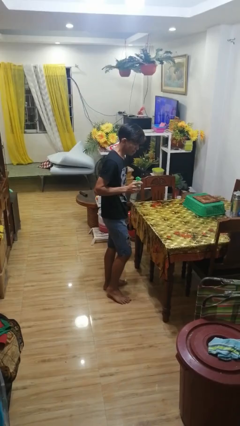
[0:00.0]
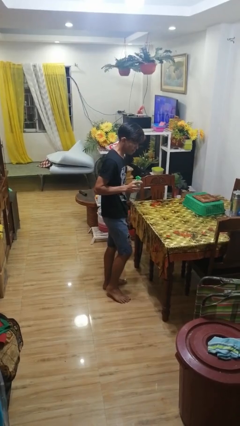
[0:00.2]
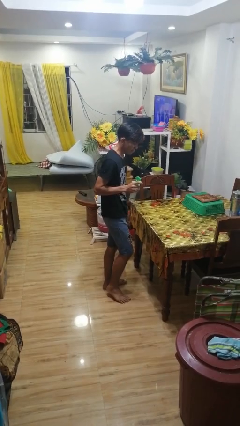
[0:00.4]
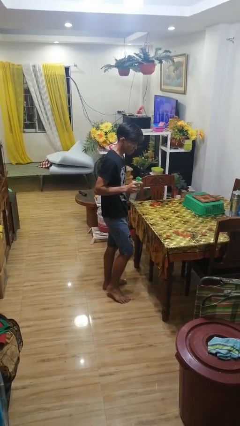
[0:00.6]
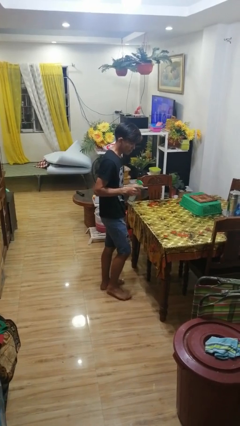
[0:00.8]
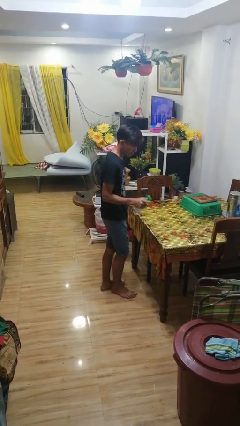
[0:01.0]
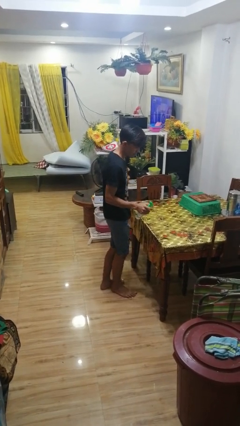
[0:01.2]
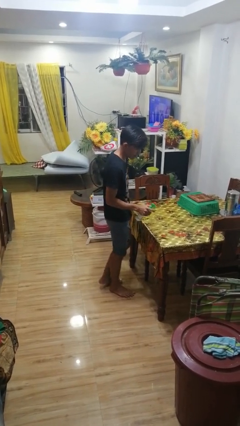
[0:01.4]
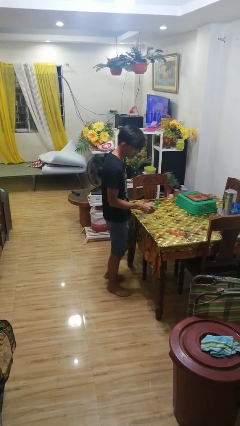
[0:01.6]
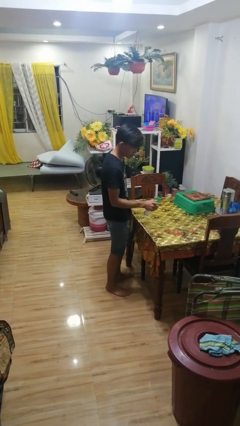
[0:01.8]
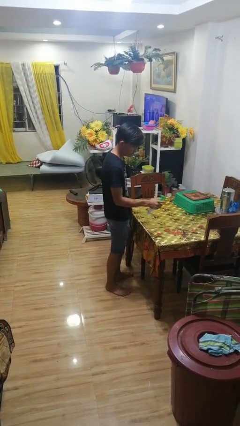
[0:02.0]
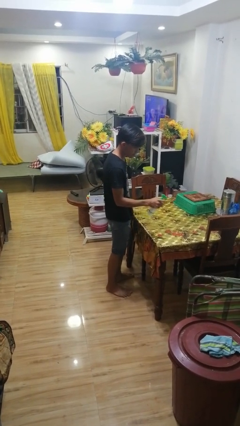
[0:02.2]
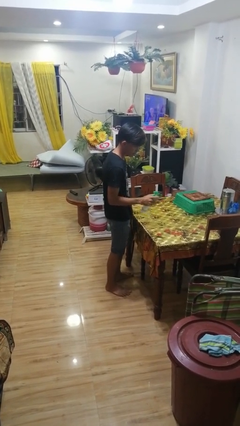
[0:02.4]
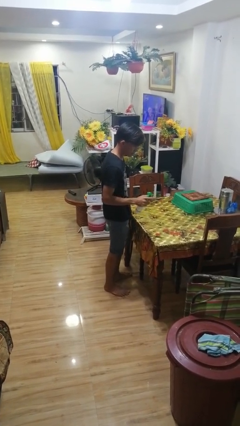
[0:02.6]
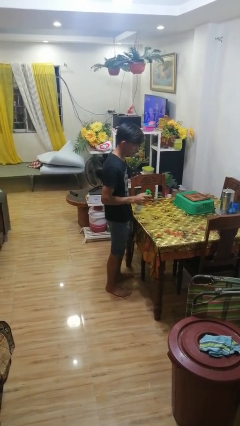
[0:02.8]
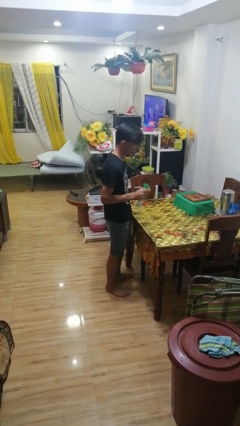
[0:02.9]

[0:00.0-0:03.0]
person sprays from bottle

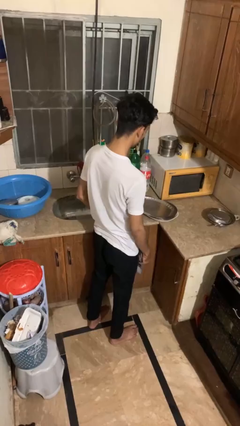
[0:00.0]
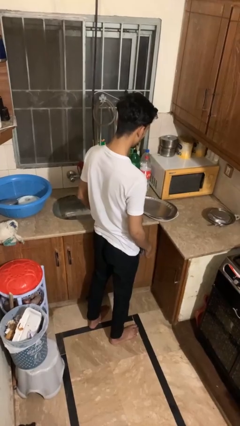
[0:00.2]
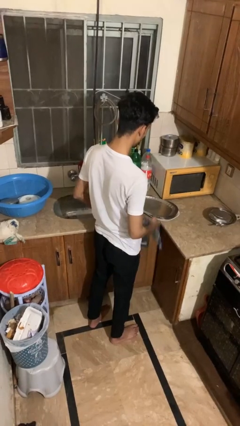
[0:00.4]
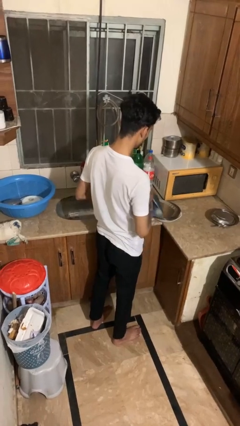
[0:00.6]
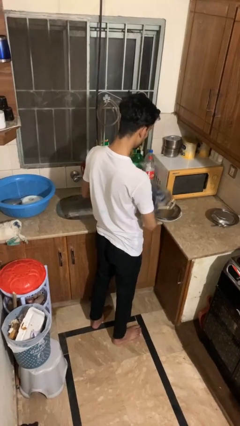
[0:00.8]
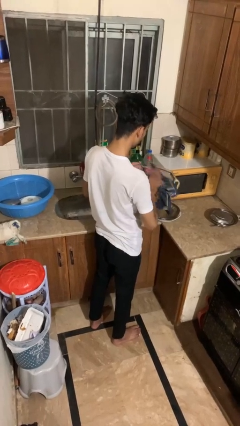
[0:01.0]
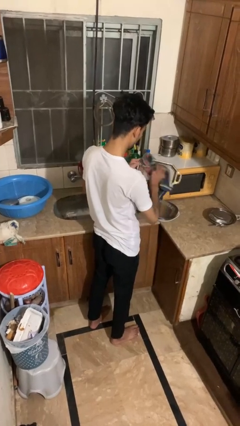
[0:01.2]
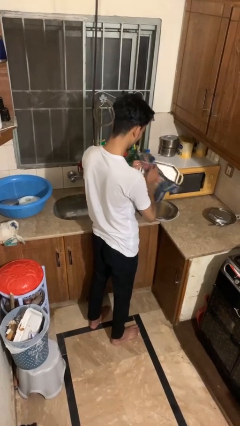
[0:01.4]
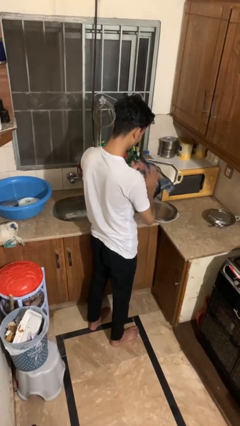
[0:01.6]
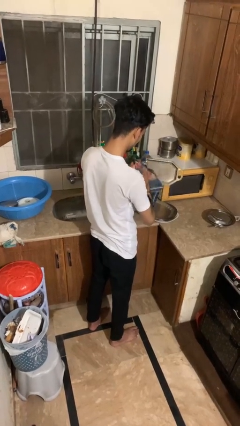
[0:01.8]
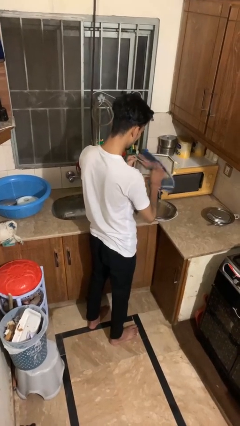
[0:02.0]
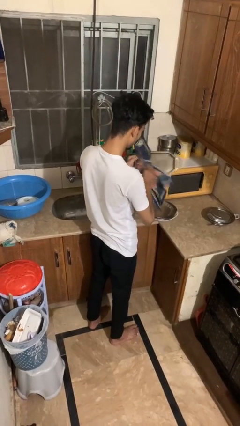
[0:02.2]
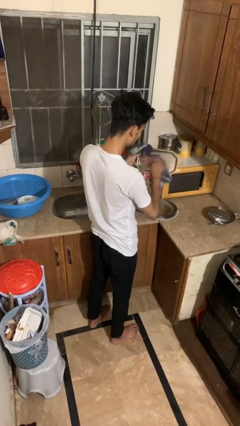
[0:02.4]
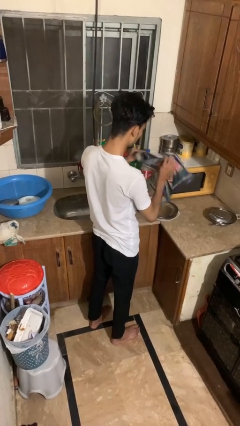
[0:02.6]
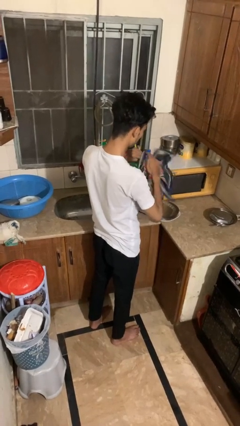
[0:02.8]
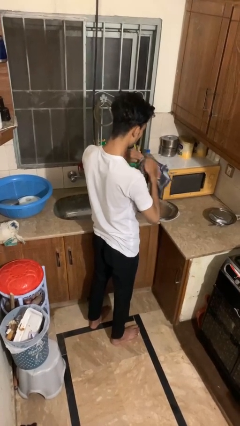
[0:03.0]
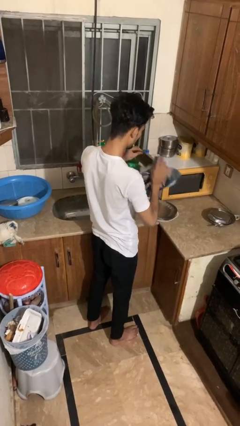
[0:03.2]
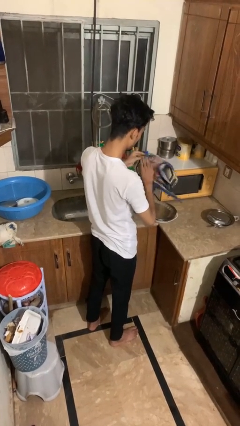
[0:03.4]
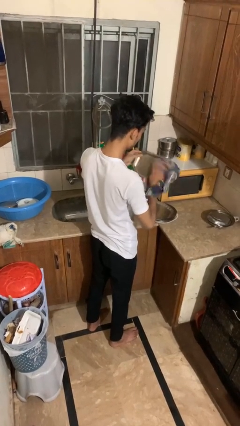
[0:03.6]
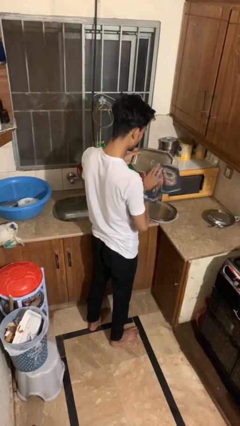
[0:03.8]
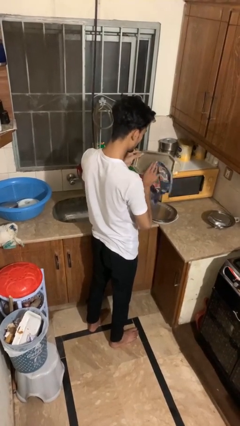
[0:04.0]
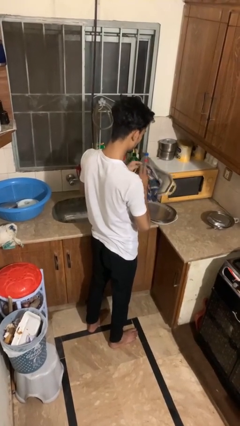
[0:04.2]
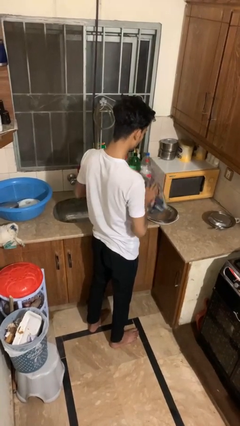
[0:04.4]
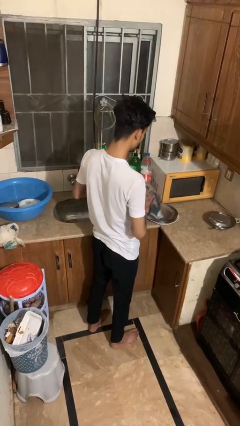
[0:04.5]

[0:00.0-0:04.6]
person dries dish

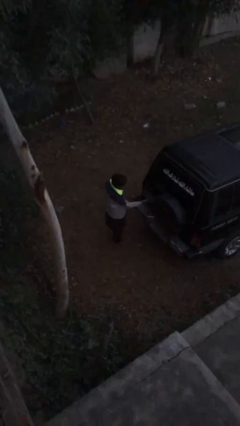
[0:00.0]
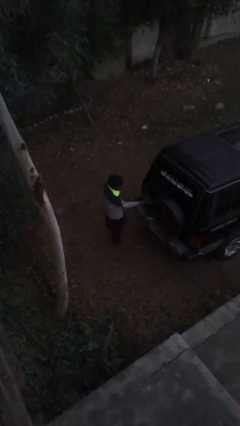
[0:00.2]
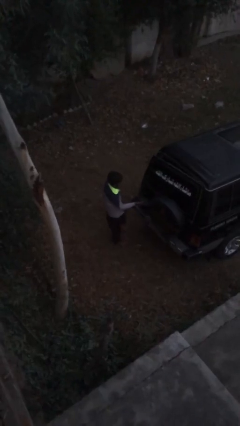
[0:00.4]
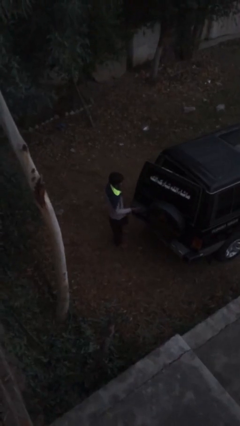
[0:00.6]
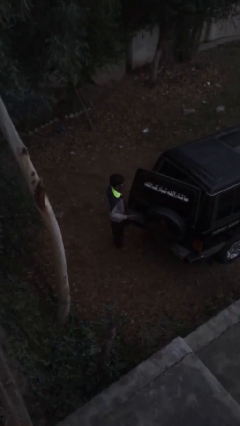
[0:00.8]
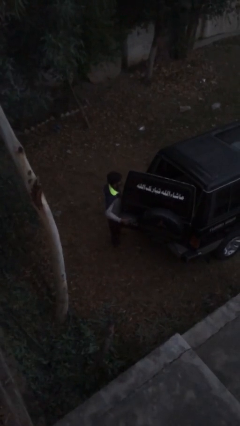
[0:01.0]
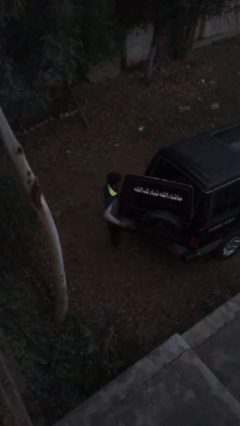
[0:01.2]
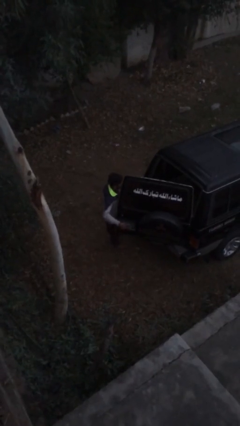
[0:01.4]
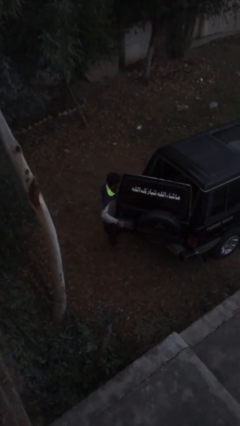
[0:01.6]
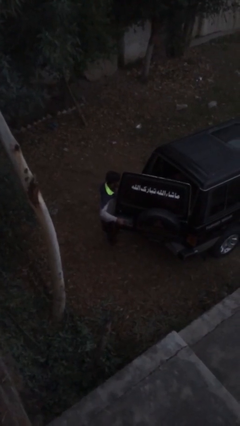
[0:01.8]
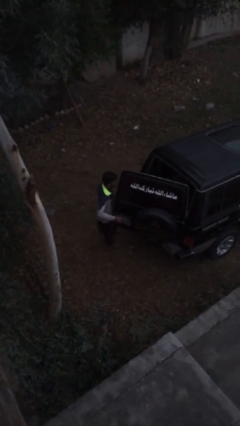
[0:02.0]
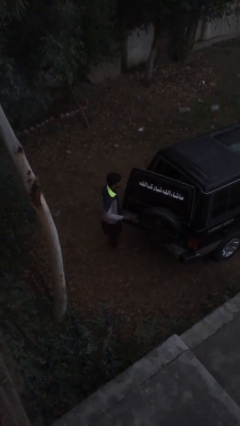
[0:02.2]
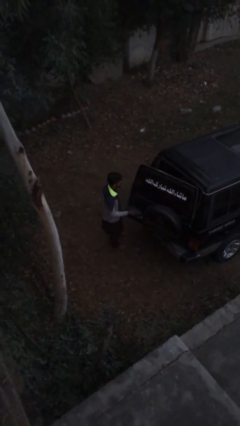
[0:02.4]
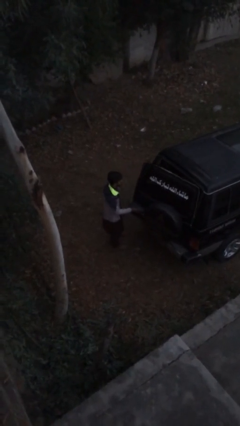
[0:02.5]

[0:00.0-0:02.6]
person opens car trunk

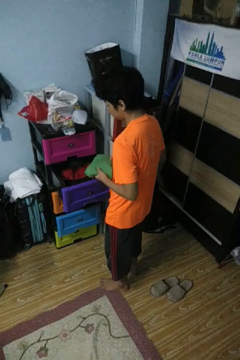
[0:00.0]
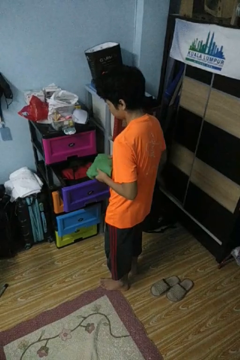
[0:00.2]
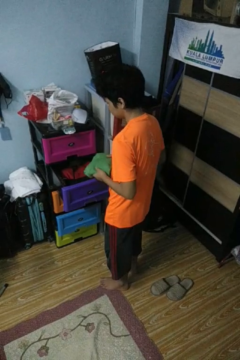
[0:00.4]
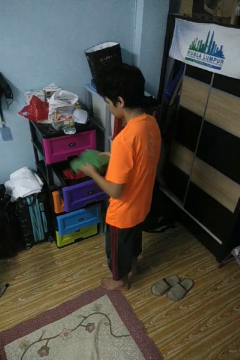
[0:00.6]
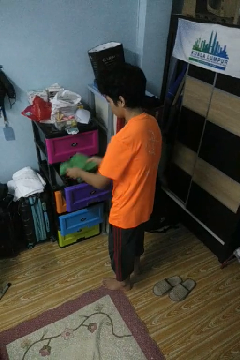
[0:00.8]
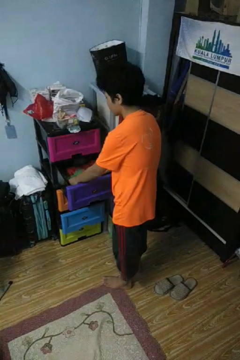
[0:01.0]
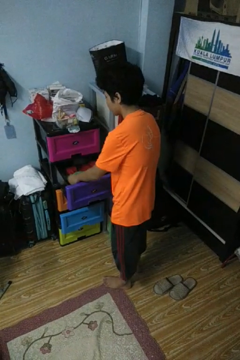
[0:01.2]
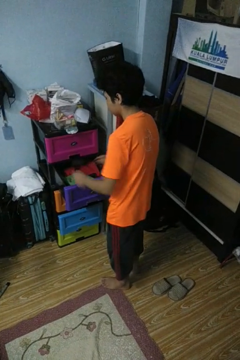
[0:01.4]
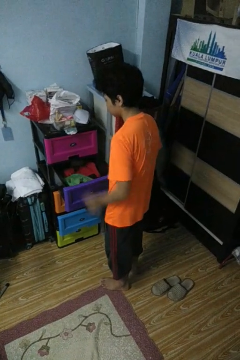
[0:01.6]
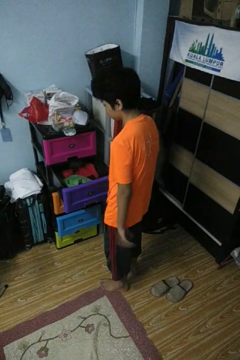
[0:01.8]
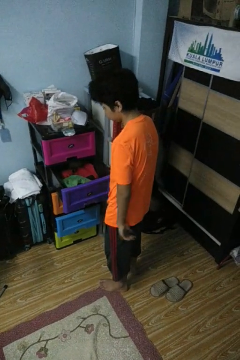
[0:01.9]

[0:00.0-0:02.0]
person puts clothes into dresser

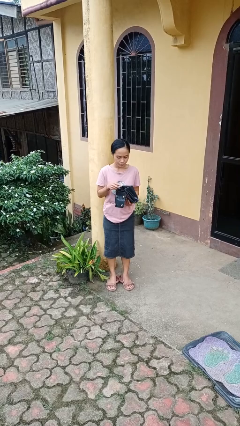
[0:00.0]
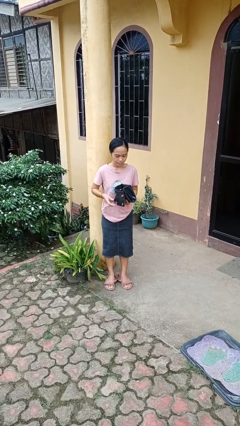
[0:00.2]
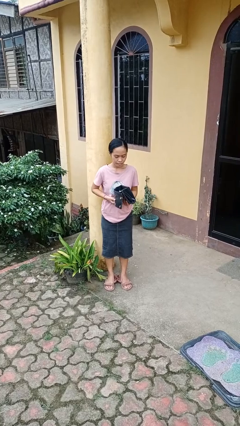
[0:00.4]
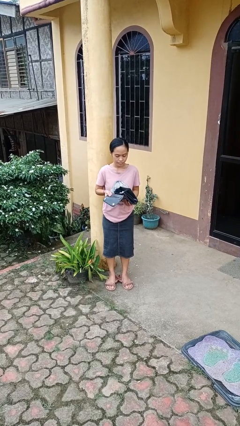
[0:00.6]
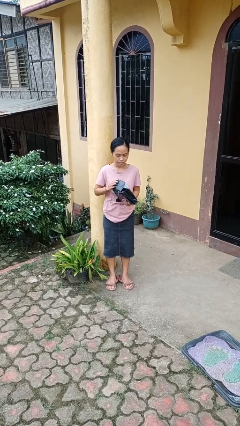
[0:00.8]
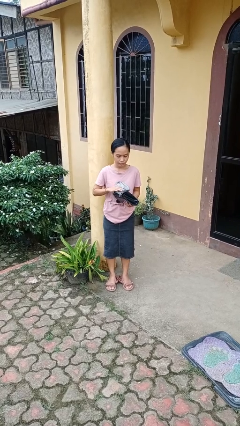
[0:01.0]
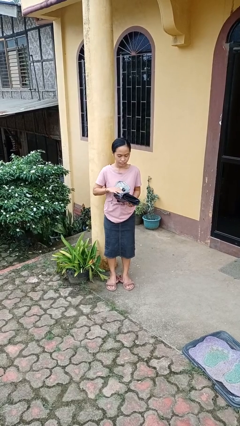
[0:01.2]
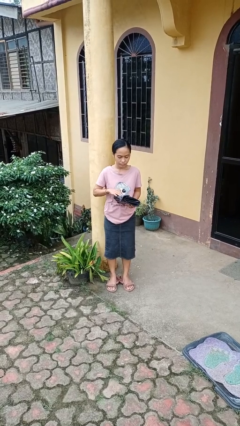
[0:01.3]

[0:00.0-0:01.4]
person puts object into purse

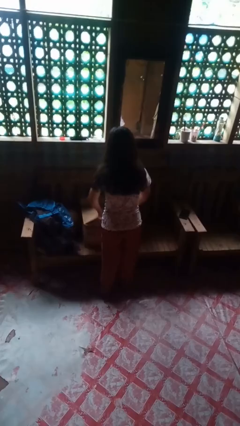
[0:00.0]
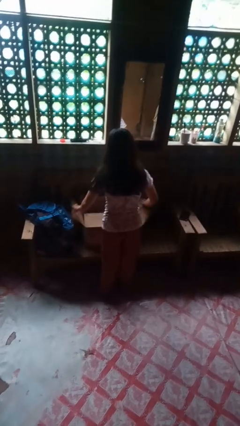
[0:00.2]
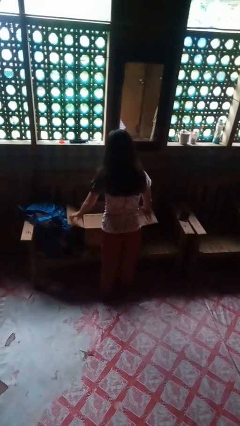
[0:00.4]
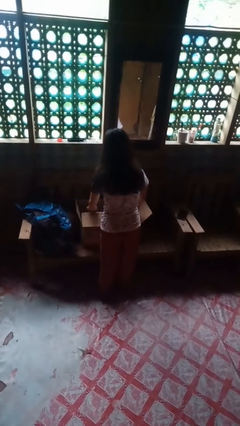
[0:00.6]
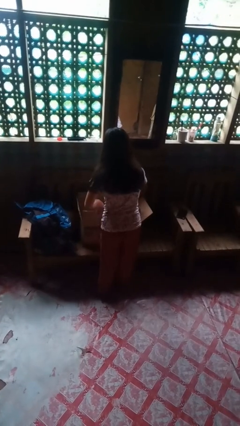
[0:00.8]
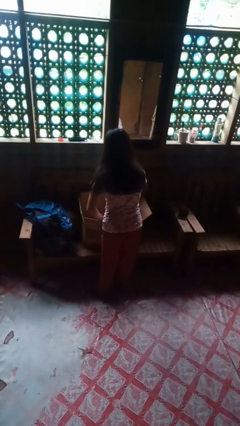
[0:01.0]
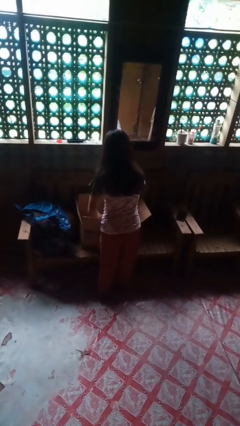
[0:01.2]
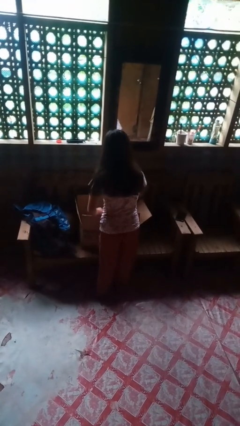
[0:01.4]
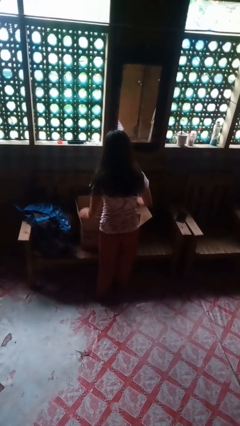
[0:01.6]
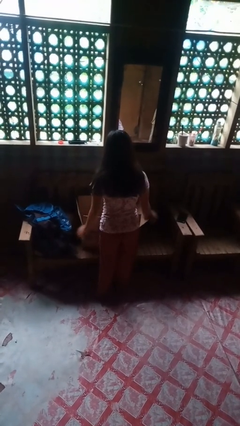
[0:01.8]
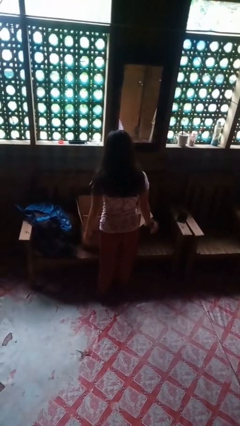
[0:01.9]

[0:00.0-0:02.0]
person opens box

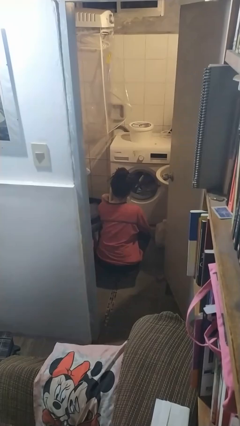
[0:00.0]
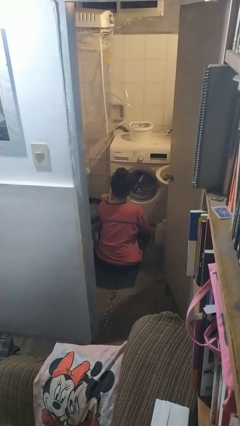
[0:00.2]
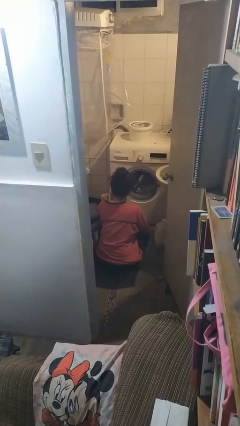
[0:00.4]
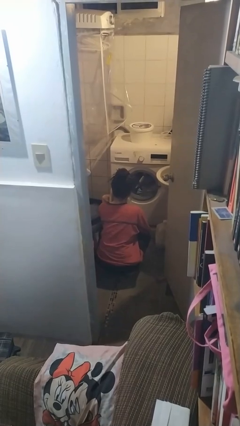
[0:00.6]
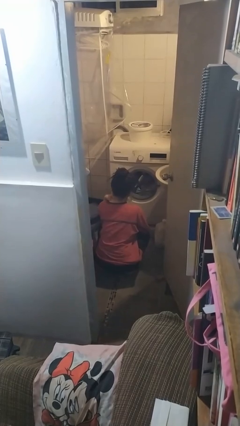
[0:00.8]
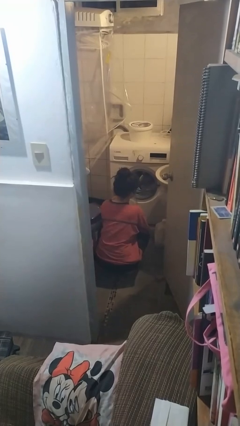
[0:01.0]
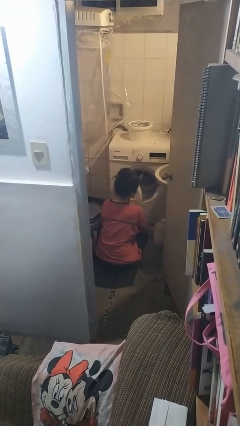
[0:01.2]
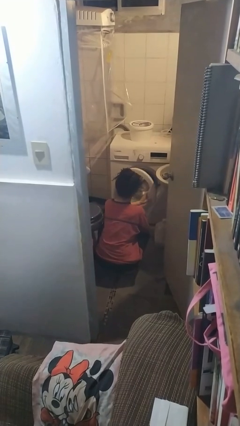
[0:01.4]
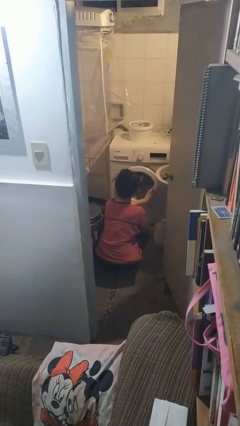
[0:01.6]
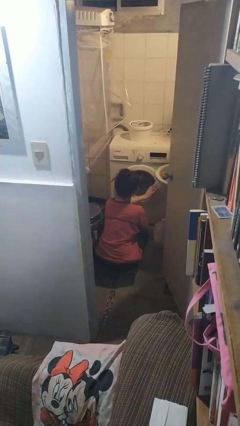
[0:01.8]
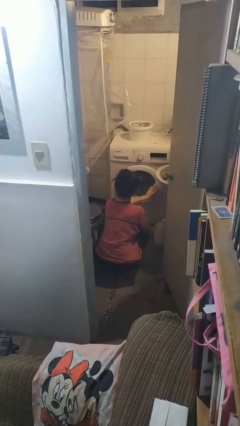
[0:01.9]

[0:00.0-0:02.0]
person closes clothes washer
